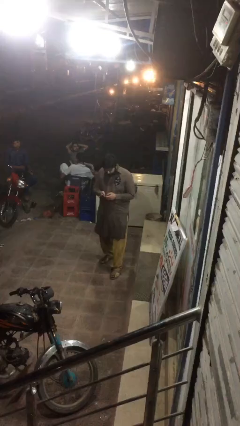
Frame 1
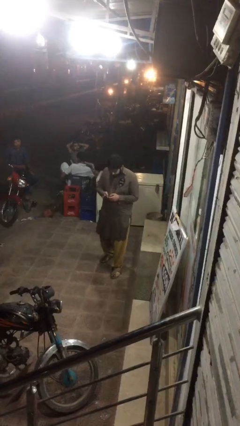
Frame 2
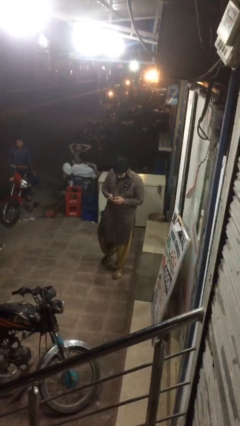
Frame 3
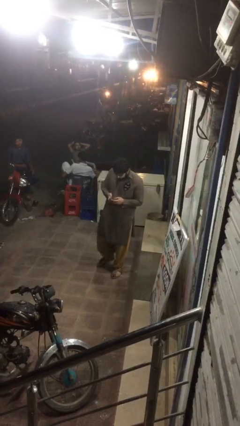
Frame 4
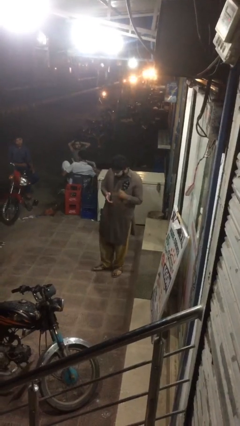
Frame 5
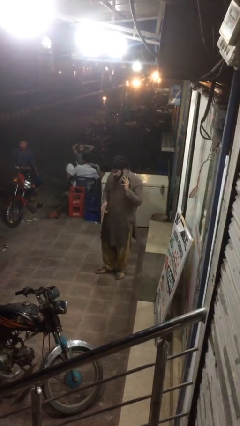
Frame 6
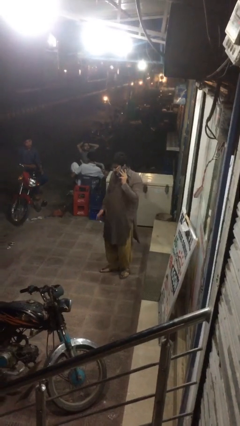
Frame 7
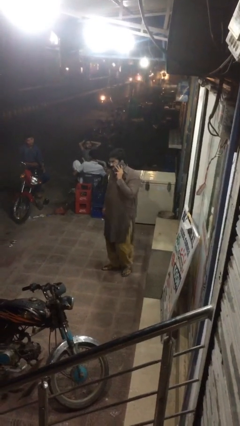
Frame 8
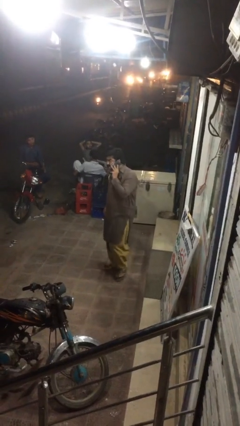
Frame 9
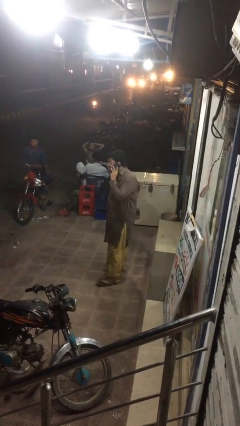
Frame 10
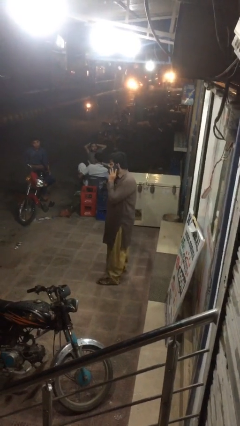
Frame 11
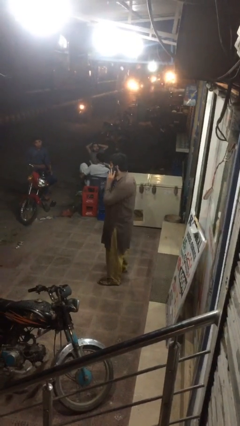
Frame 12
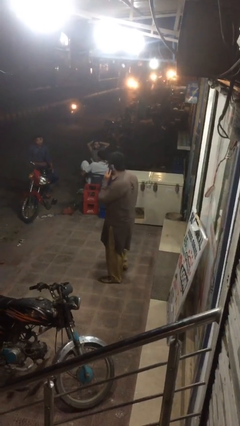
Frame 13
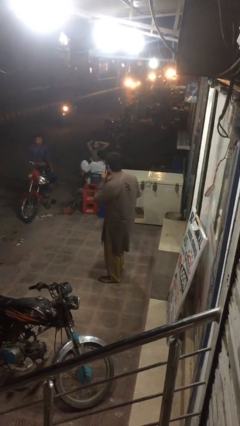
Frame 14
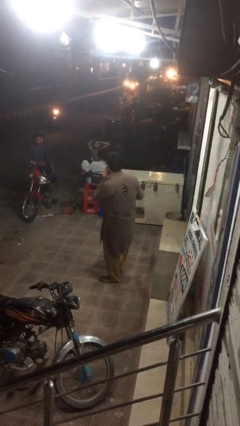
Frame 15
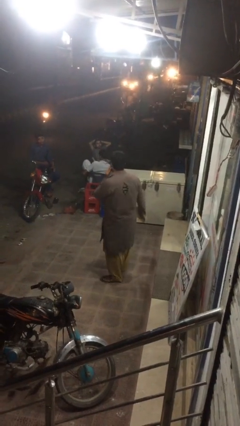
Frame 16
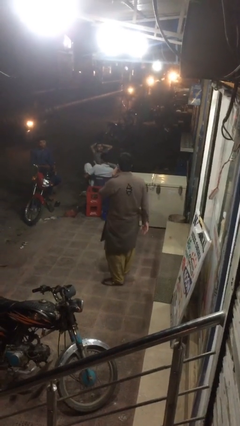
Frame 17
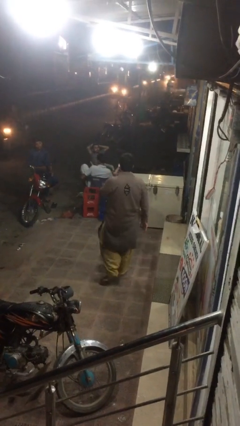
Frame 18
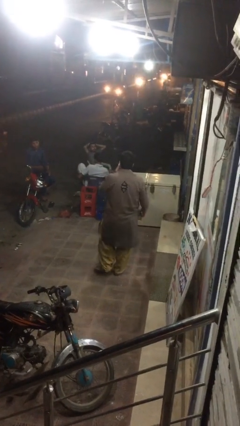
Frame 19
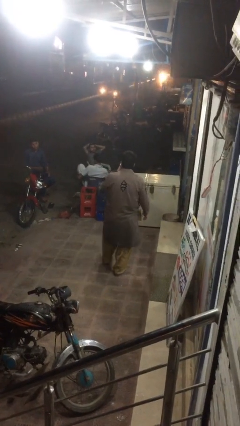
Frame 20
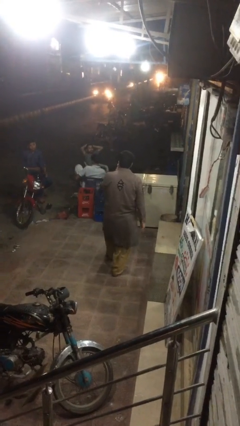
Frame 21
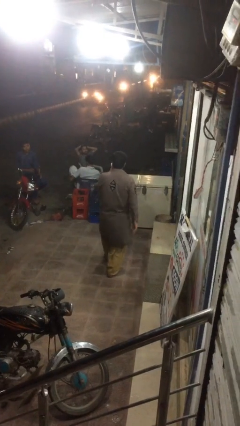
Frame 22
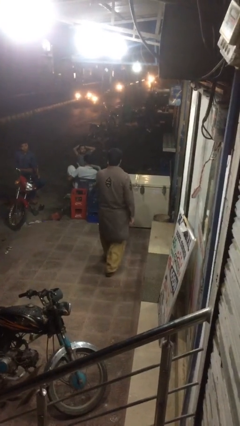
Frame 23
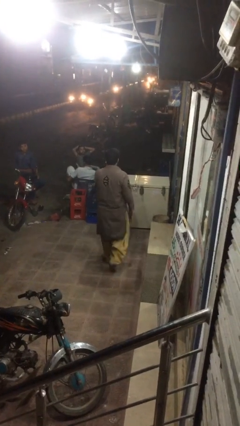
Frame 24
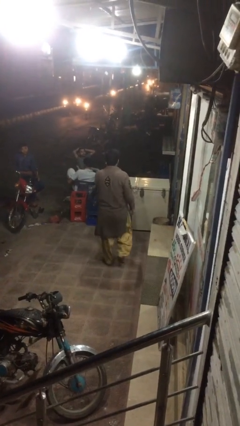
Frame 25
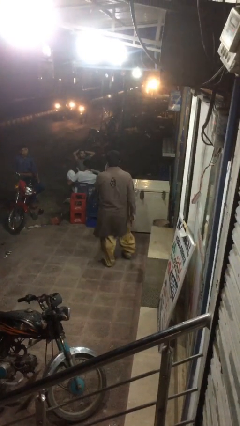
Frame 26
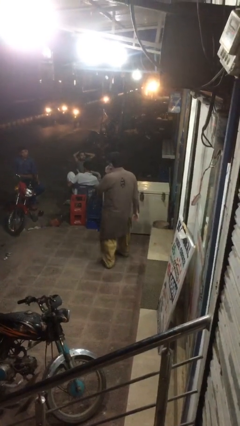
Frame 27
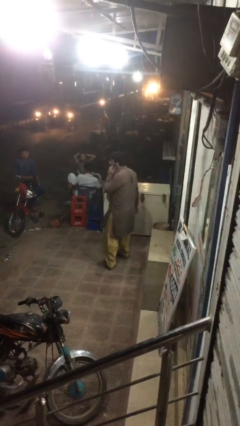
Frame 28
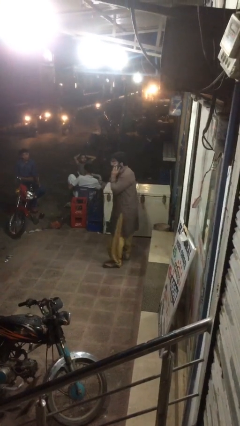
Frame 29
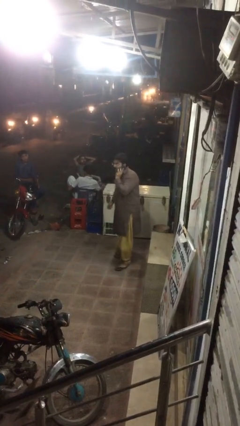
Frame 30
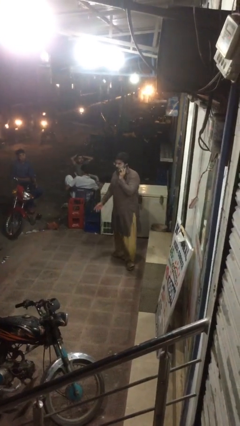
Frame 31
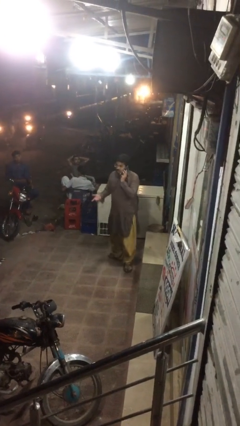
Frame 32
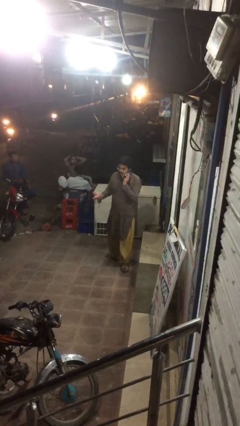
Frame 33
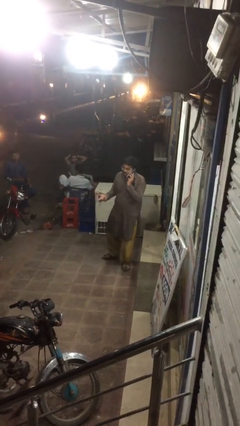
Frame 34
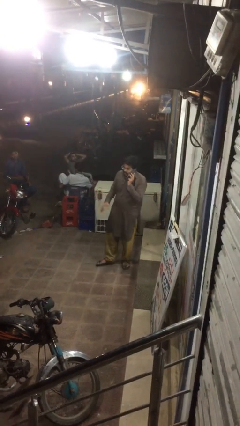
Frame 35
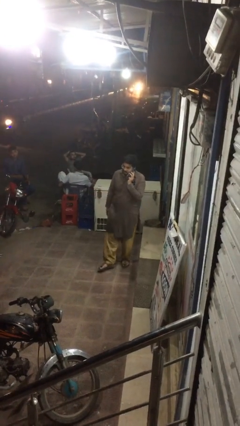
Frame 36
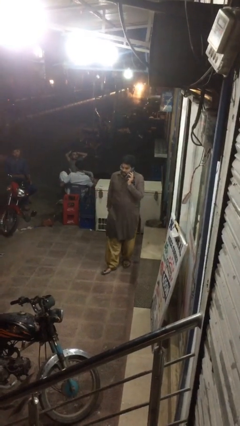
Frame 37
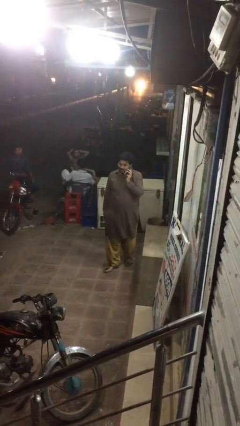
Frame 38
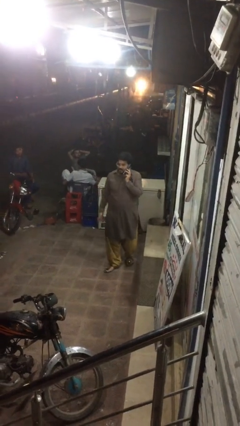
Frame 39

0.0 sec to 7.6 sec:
person talks on phone

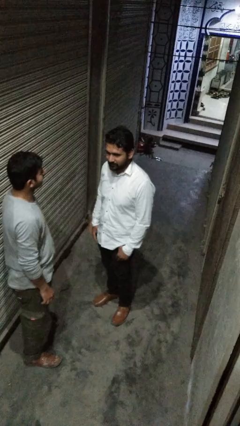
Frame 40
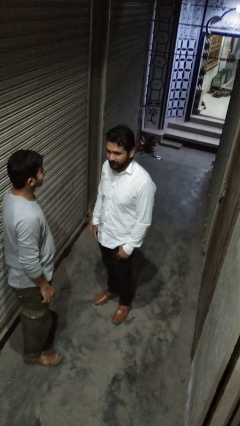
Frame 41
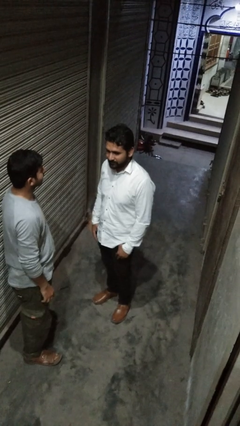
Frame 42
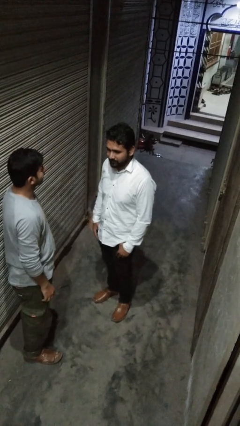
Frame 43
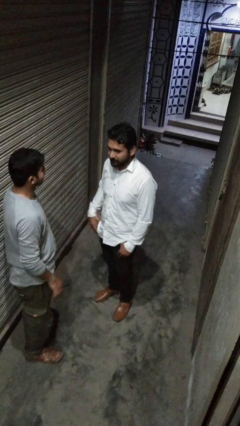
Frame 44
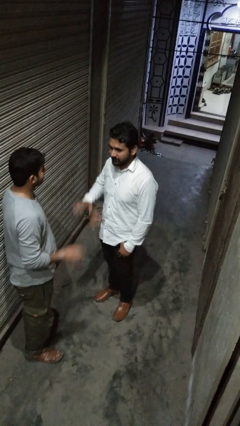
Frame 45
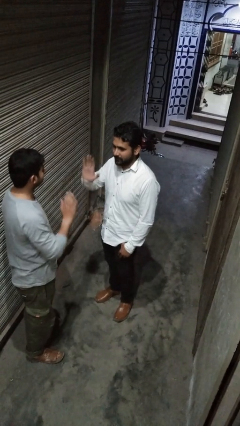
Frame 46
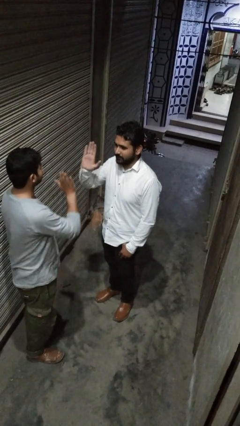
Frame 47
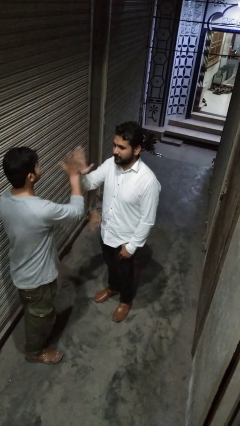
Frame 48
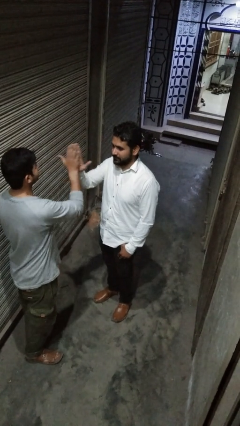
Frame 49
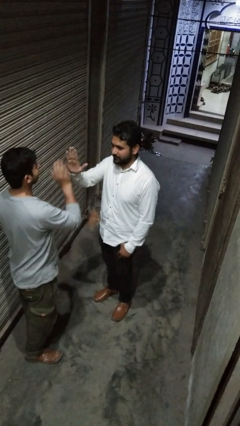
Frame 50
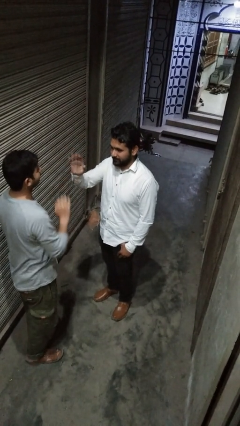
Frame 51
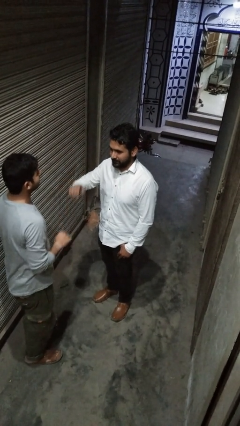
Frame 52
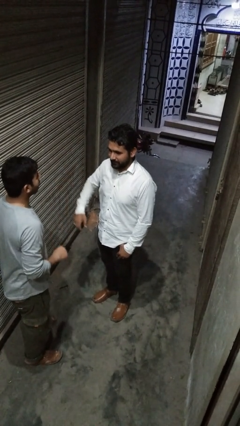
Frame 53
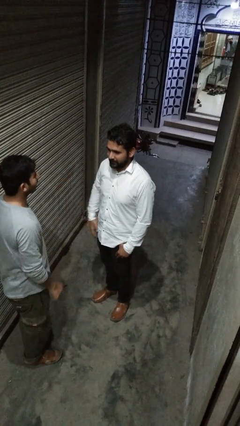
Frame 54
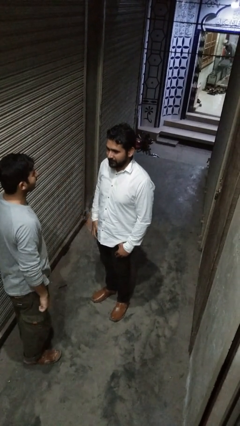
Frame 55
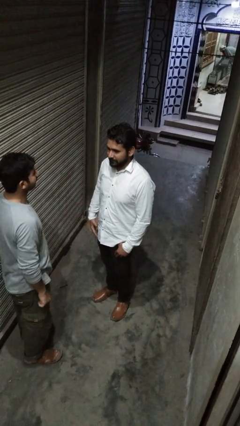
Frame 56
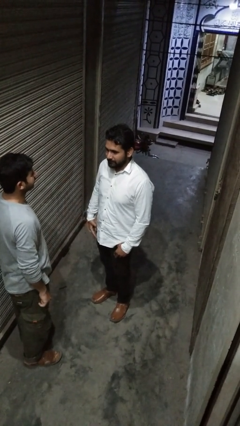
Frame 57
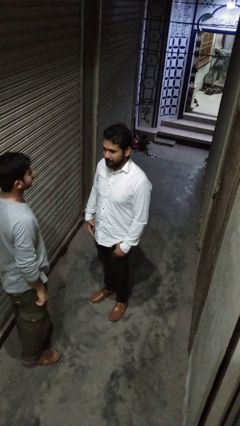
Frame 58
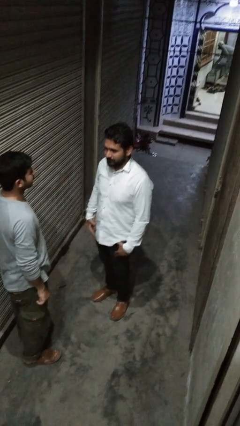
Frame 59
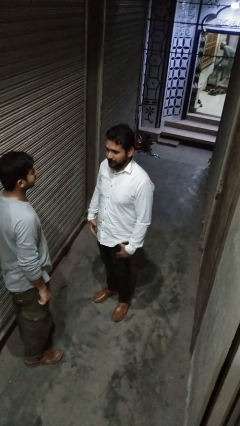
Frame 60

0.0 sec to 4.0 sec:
person highfives hand

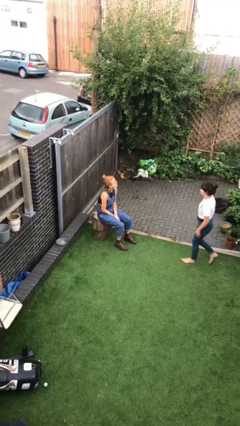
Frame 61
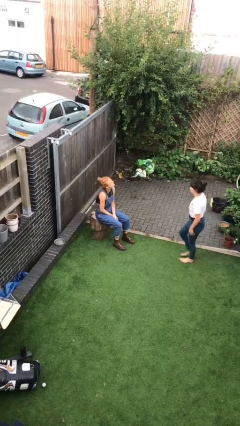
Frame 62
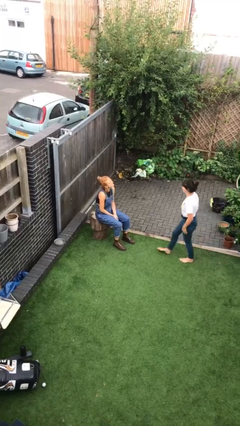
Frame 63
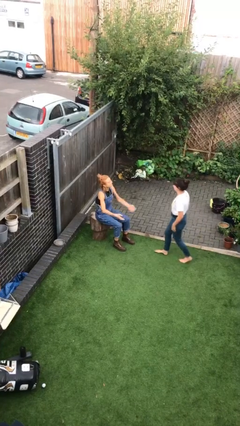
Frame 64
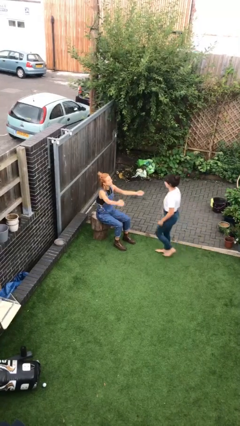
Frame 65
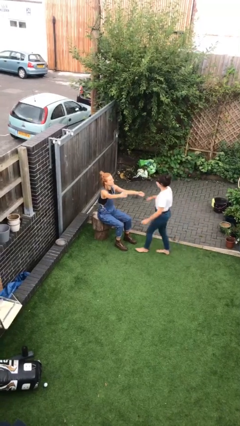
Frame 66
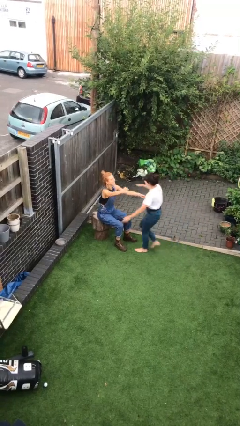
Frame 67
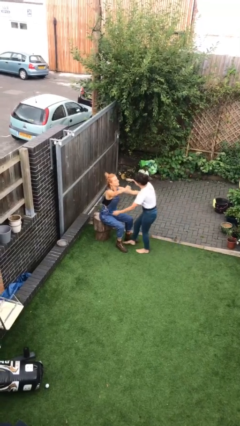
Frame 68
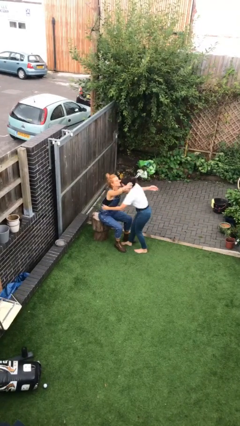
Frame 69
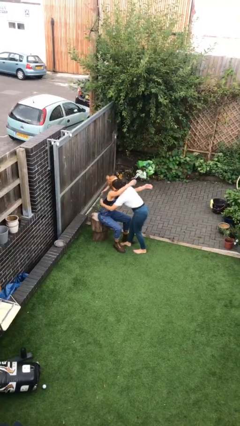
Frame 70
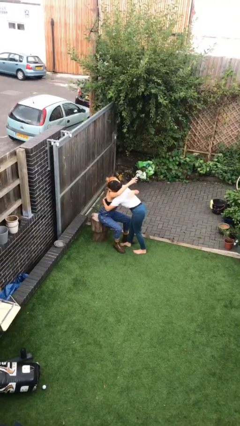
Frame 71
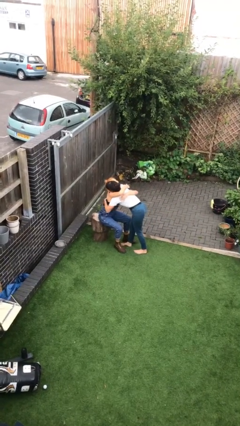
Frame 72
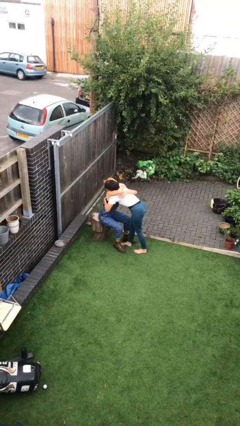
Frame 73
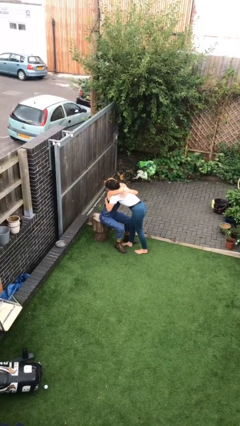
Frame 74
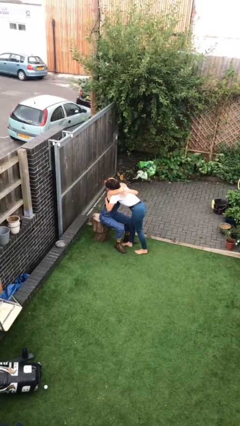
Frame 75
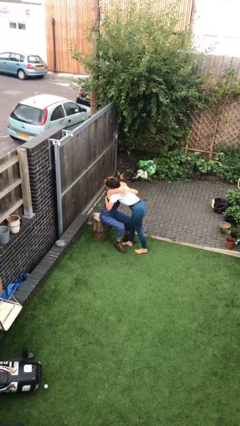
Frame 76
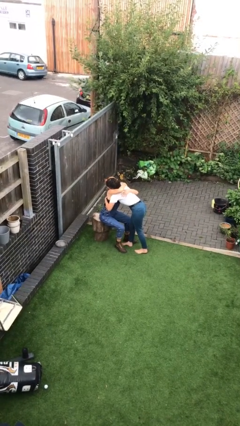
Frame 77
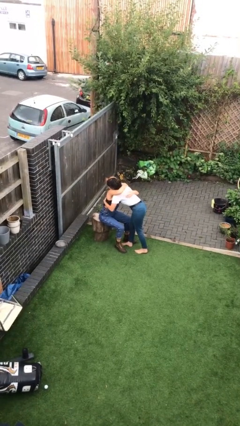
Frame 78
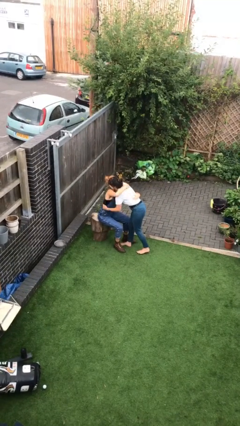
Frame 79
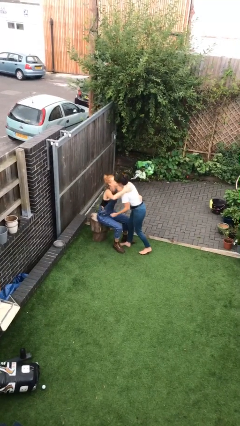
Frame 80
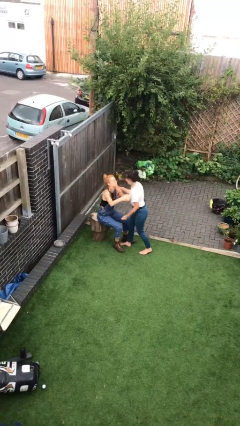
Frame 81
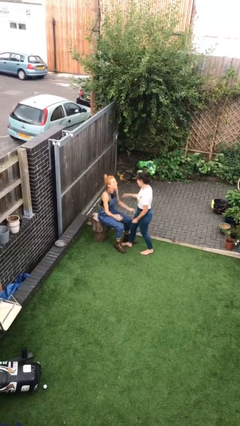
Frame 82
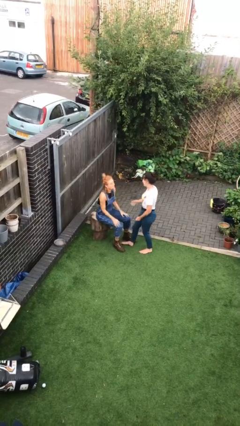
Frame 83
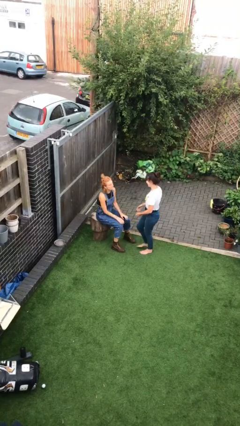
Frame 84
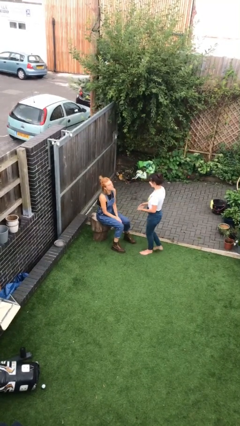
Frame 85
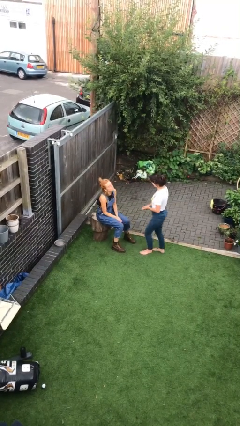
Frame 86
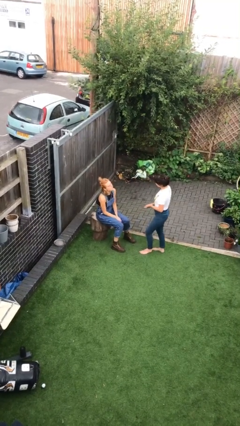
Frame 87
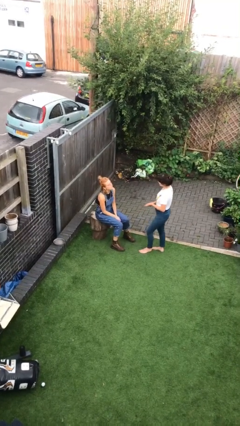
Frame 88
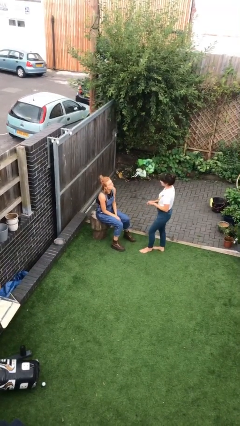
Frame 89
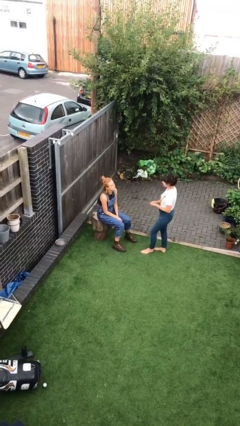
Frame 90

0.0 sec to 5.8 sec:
person embraces person

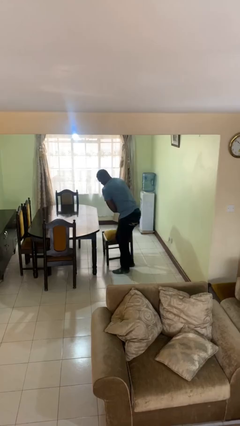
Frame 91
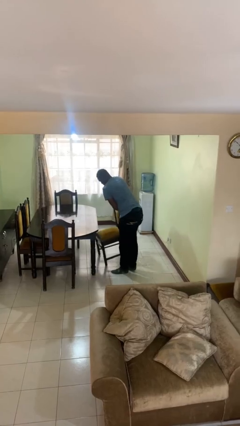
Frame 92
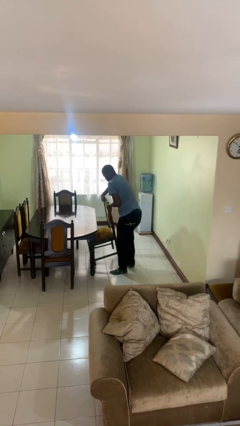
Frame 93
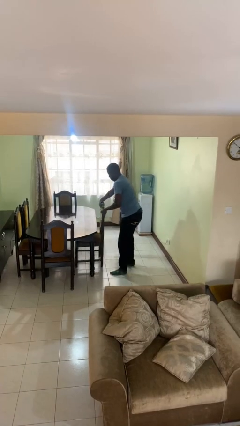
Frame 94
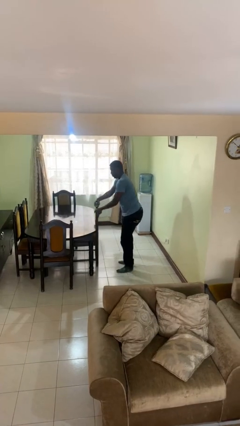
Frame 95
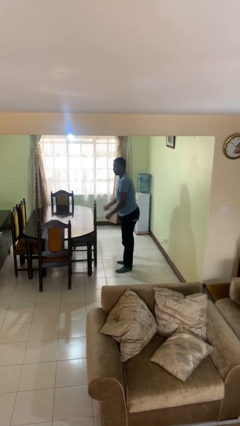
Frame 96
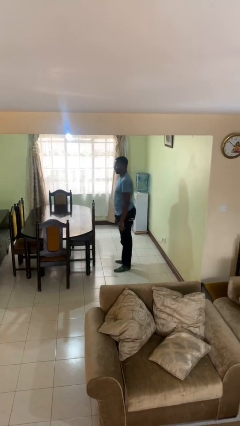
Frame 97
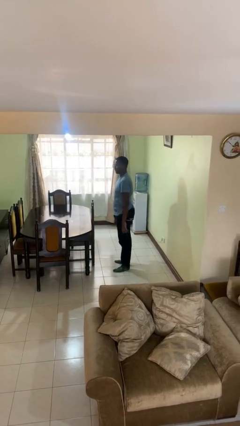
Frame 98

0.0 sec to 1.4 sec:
person stands up
